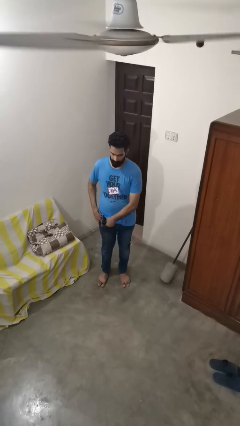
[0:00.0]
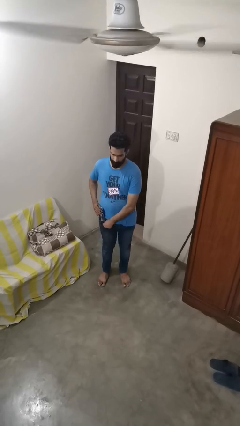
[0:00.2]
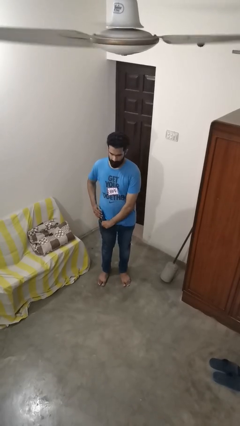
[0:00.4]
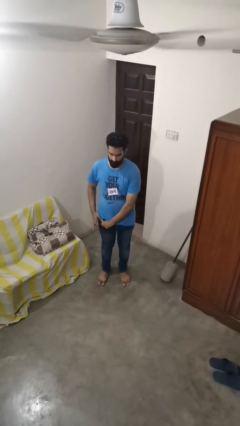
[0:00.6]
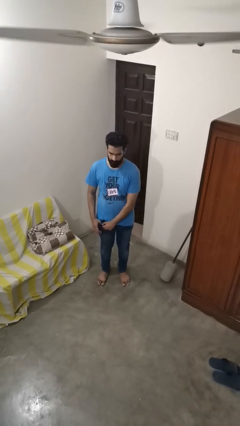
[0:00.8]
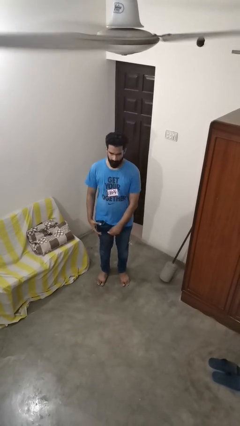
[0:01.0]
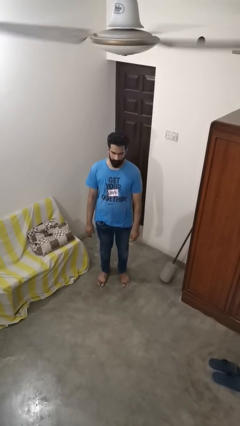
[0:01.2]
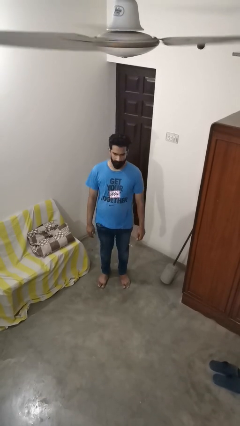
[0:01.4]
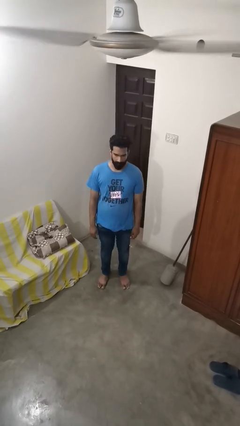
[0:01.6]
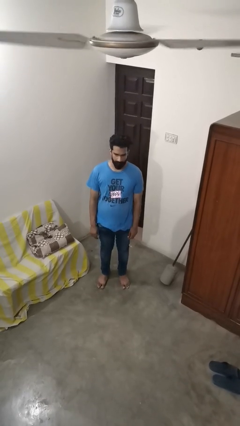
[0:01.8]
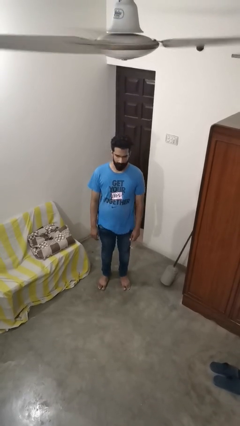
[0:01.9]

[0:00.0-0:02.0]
person puts phone into pocket

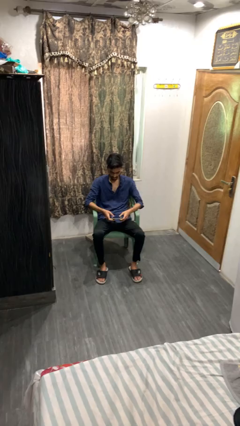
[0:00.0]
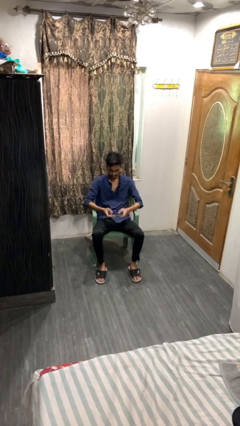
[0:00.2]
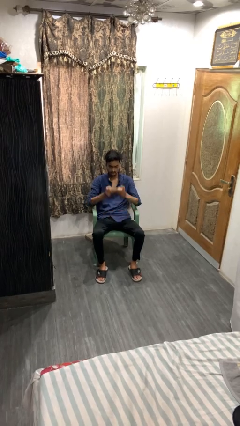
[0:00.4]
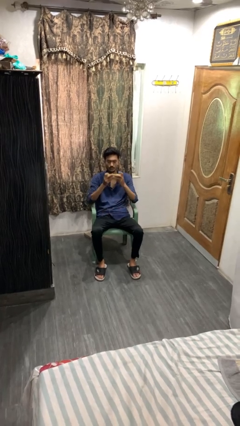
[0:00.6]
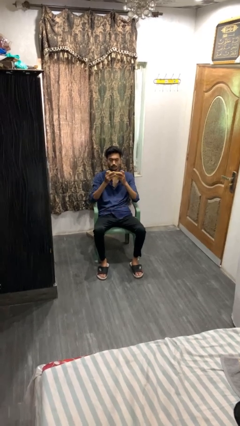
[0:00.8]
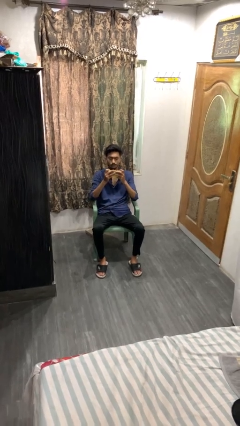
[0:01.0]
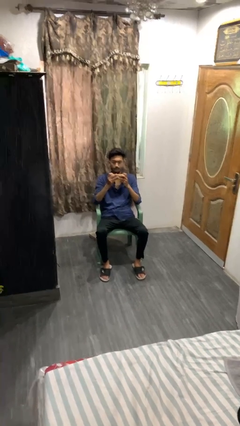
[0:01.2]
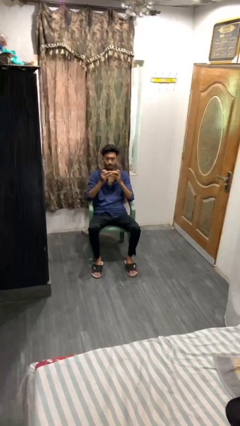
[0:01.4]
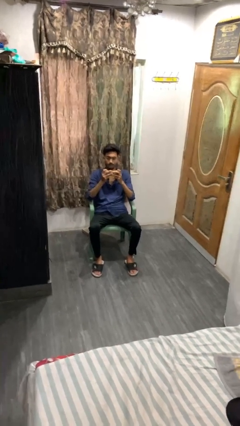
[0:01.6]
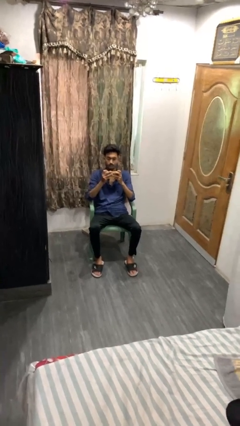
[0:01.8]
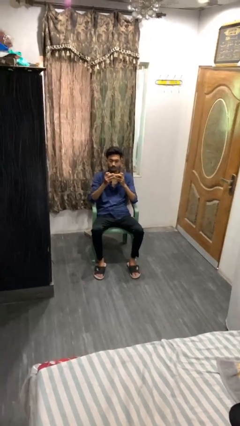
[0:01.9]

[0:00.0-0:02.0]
person interacts with handheld game

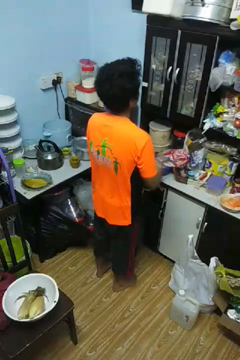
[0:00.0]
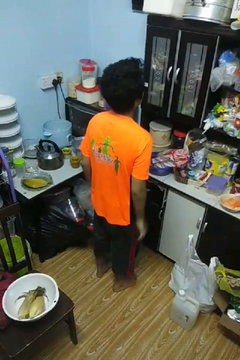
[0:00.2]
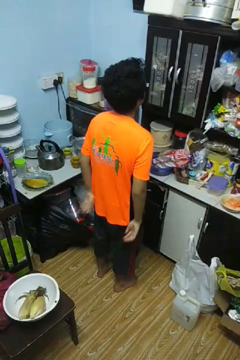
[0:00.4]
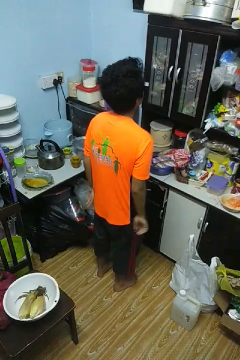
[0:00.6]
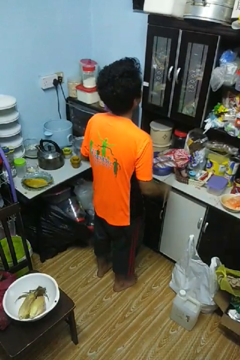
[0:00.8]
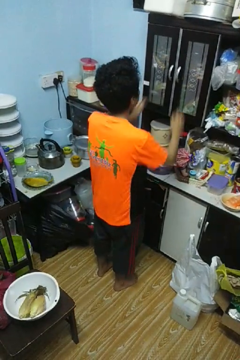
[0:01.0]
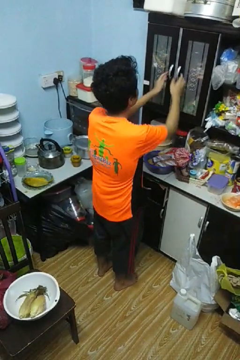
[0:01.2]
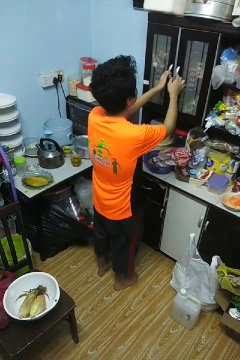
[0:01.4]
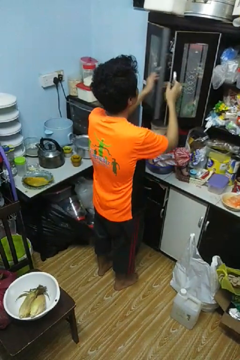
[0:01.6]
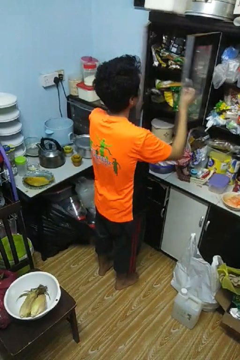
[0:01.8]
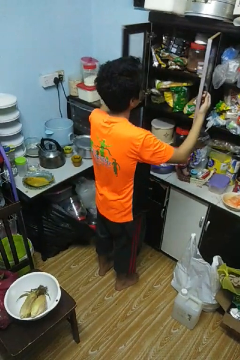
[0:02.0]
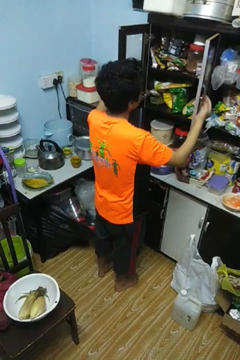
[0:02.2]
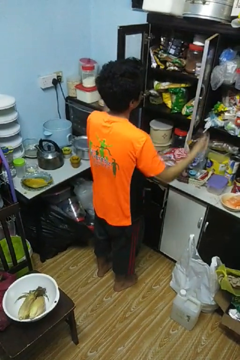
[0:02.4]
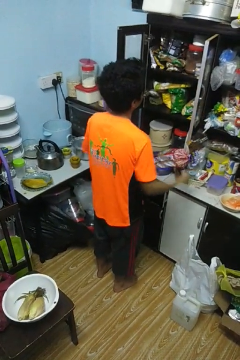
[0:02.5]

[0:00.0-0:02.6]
person opens cabinet

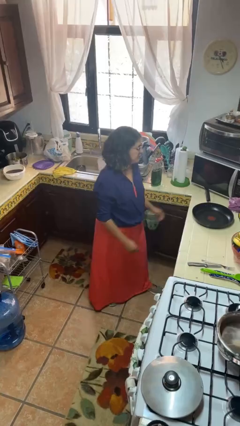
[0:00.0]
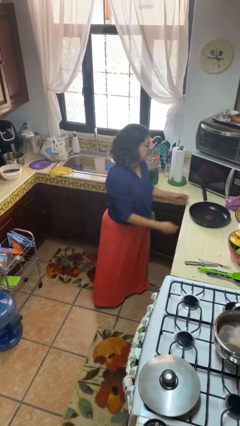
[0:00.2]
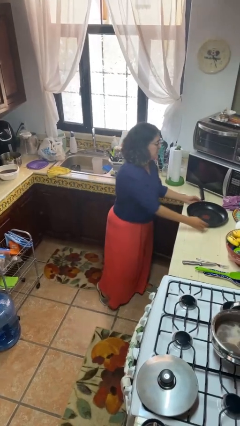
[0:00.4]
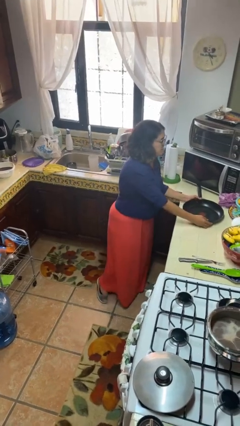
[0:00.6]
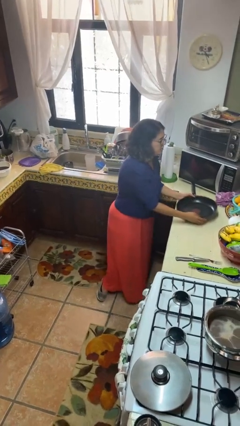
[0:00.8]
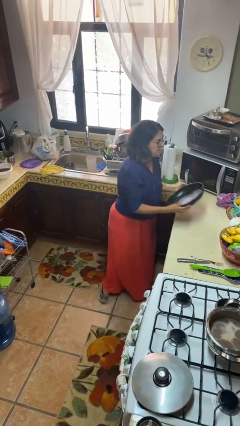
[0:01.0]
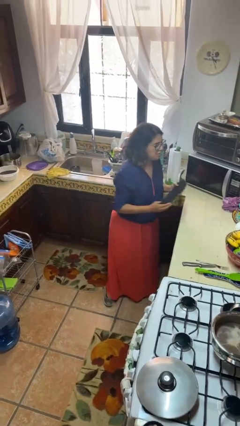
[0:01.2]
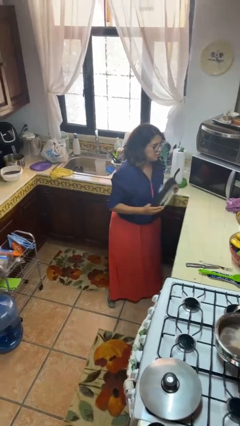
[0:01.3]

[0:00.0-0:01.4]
person picks up object from countertop

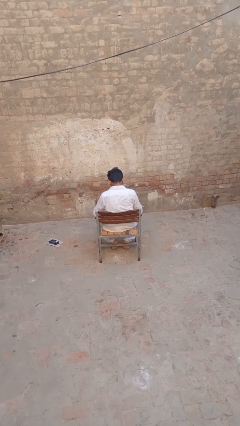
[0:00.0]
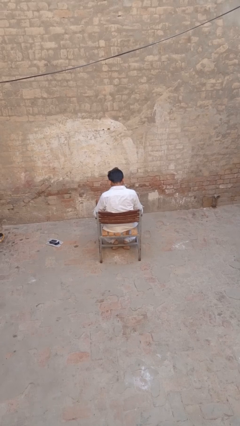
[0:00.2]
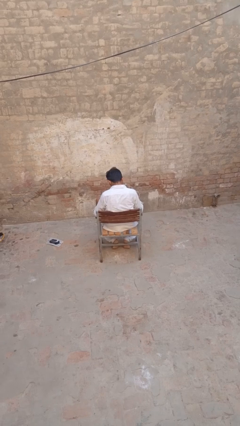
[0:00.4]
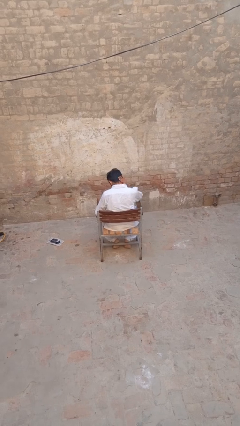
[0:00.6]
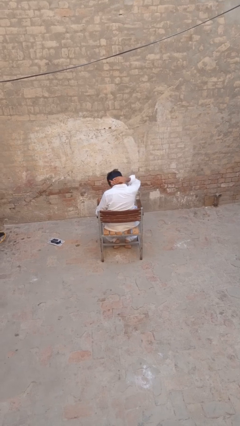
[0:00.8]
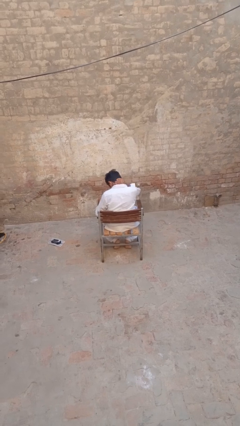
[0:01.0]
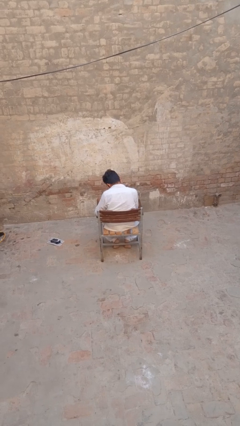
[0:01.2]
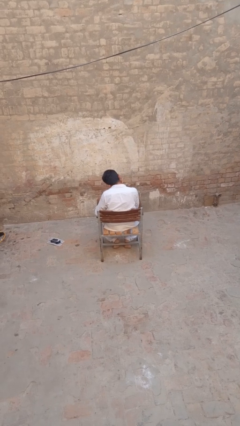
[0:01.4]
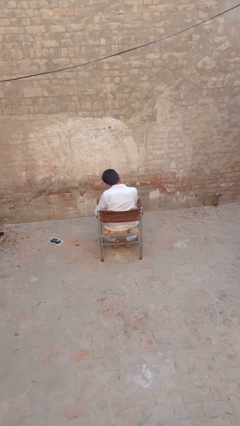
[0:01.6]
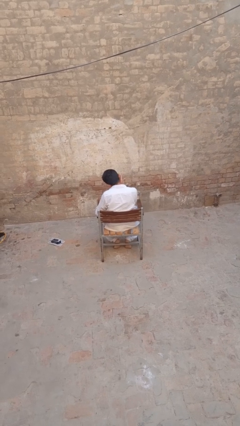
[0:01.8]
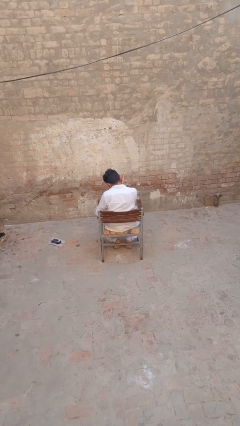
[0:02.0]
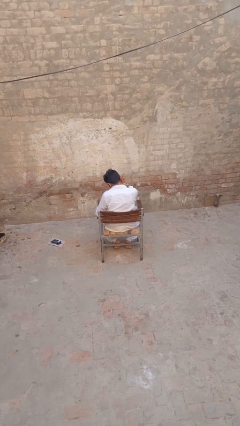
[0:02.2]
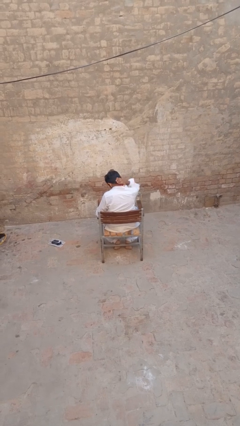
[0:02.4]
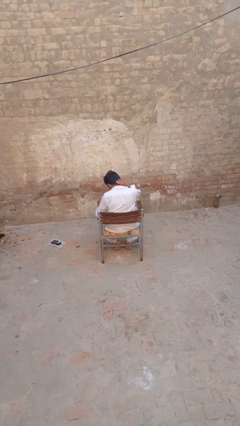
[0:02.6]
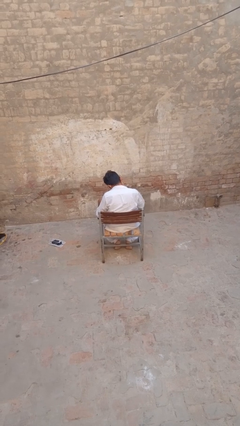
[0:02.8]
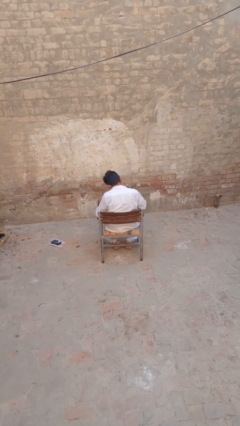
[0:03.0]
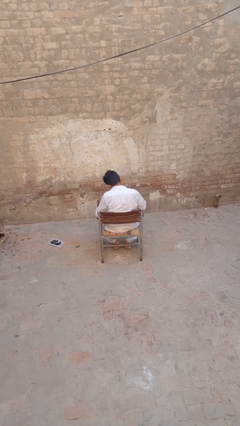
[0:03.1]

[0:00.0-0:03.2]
person rubs neck

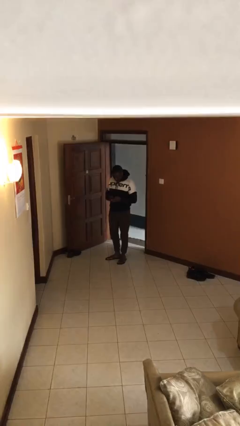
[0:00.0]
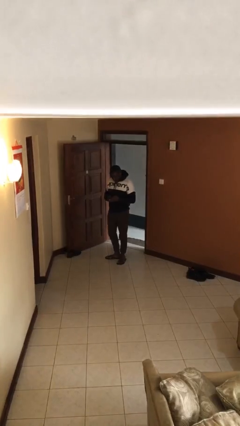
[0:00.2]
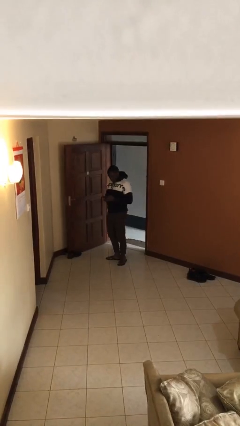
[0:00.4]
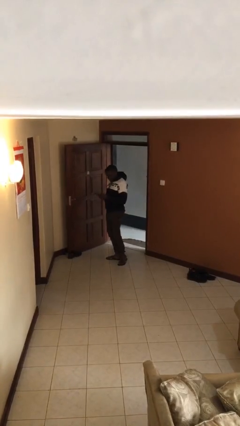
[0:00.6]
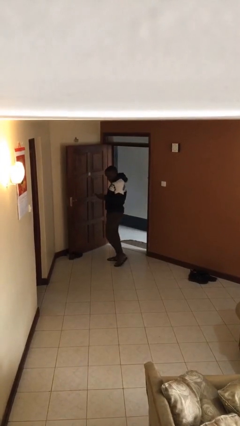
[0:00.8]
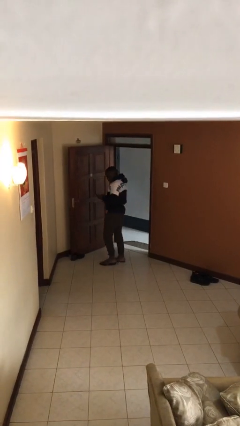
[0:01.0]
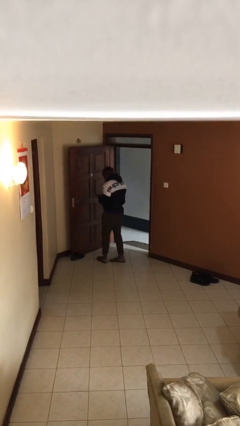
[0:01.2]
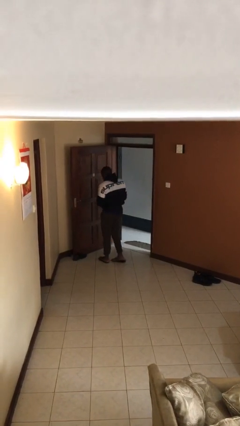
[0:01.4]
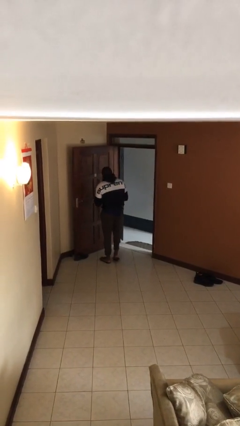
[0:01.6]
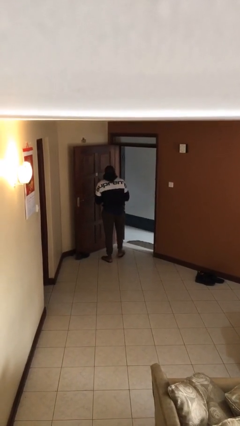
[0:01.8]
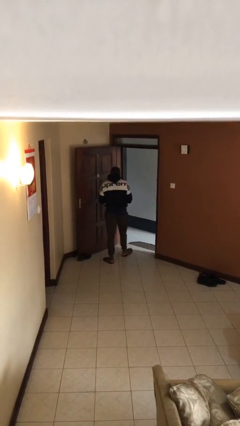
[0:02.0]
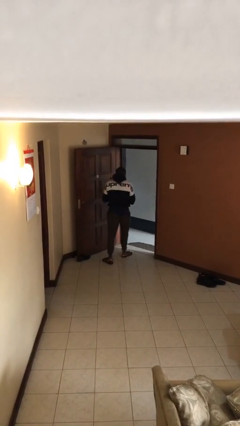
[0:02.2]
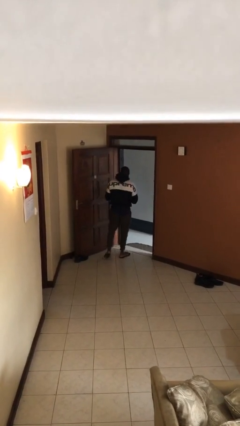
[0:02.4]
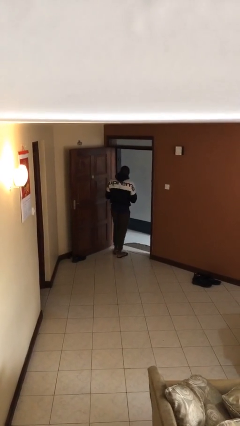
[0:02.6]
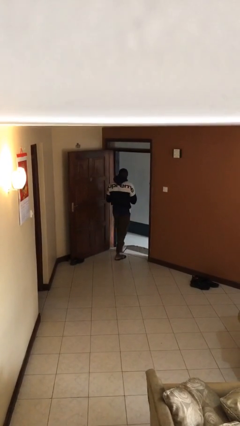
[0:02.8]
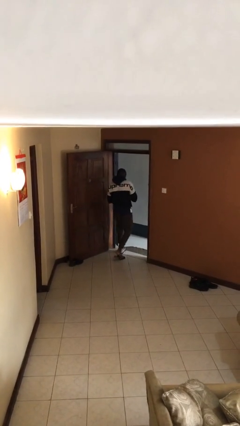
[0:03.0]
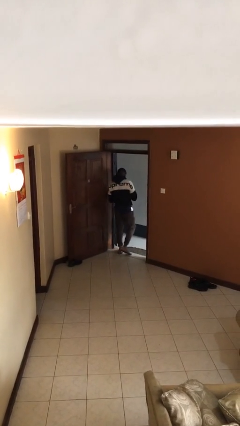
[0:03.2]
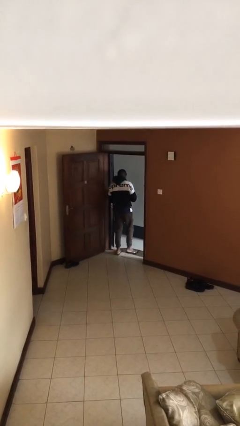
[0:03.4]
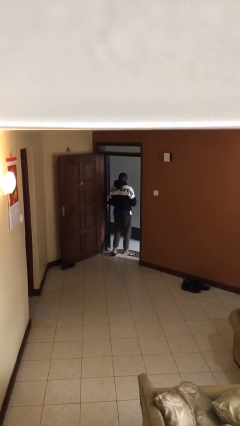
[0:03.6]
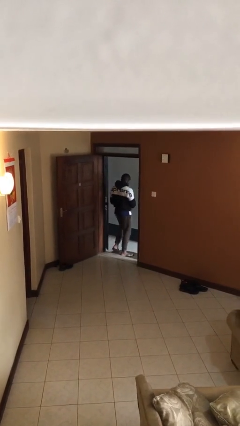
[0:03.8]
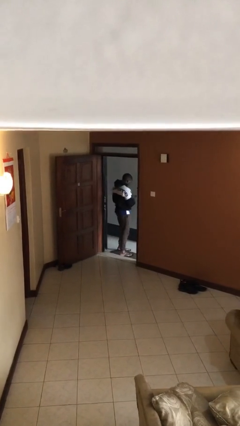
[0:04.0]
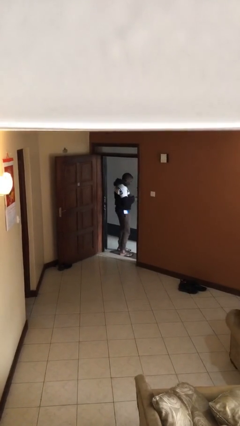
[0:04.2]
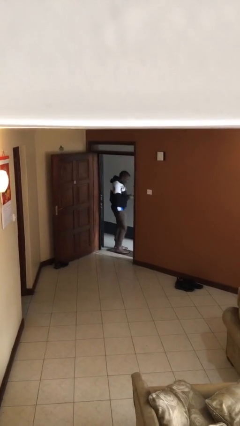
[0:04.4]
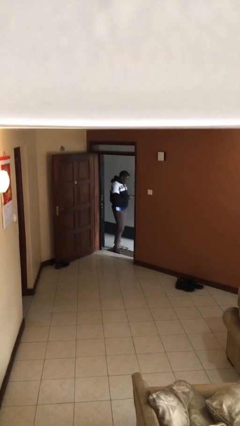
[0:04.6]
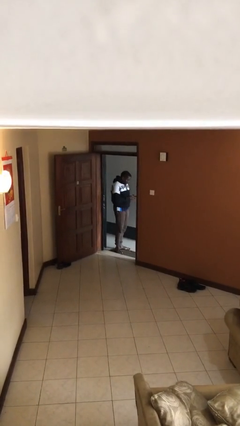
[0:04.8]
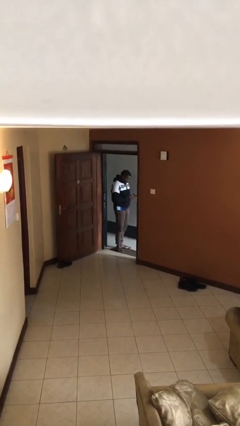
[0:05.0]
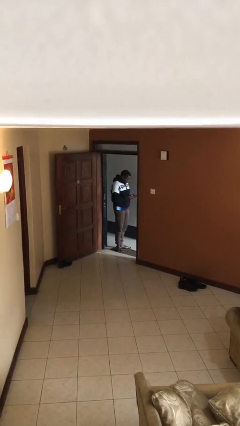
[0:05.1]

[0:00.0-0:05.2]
person exits scene through structure

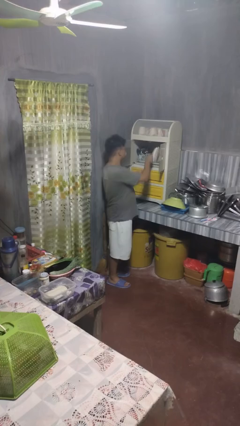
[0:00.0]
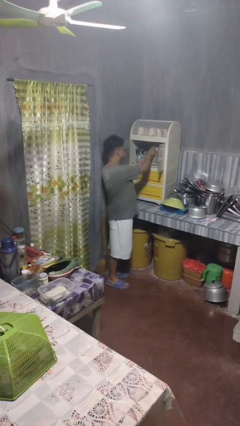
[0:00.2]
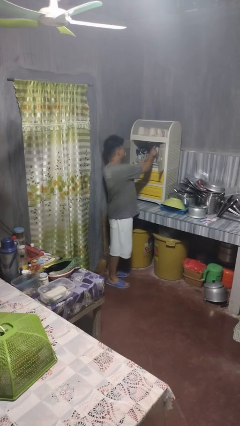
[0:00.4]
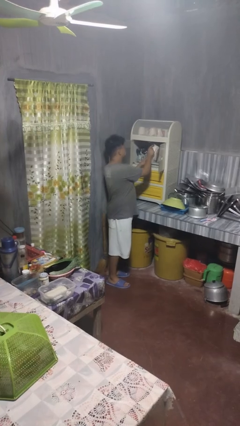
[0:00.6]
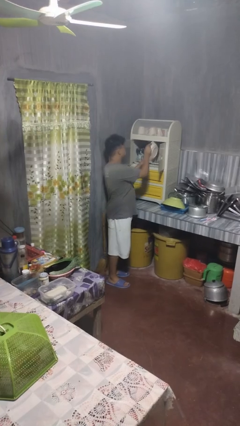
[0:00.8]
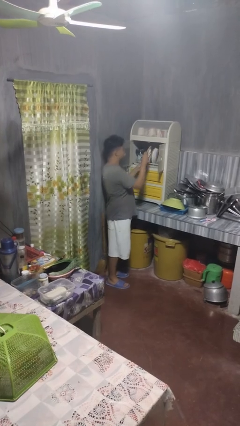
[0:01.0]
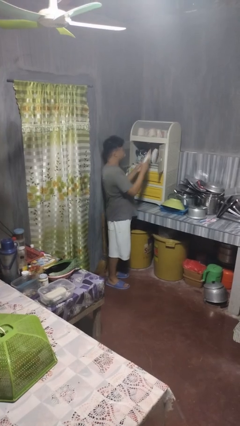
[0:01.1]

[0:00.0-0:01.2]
person takes object from cabinet
